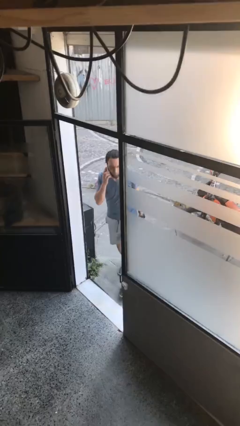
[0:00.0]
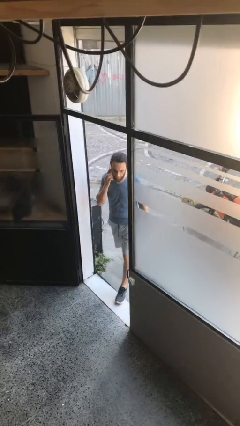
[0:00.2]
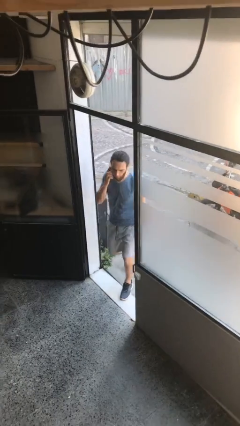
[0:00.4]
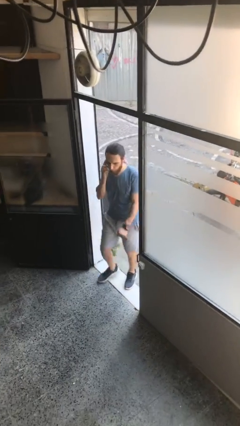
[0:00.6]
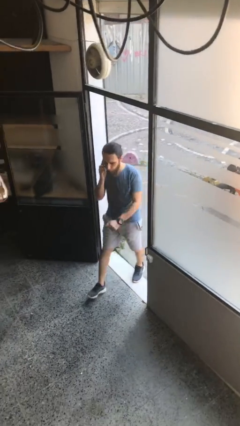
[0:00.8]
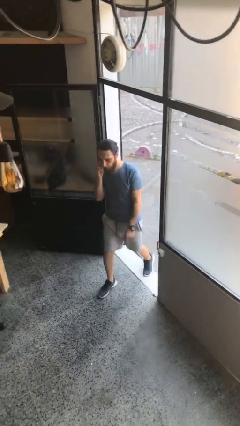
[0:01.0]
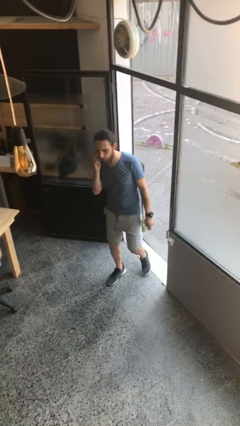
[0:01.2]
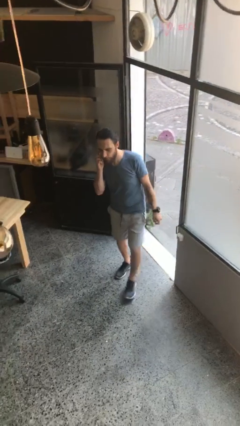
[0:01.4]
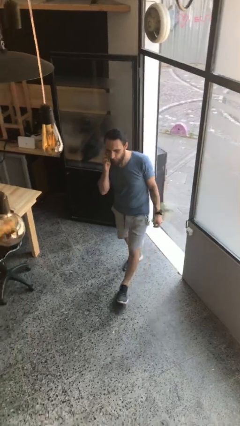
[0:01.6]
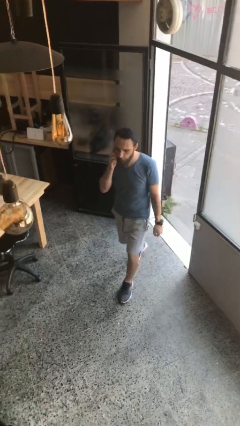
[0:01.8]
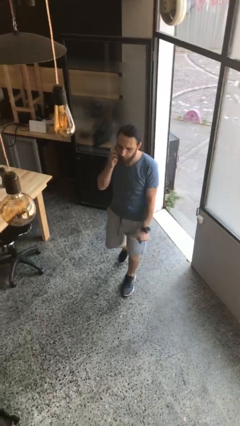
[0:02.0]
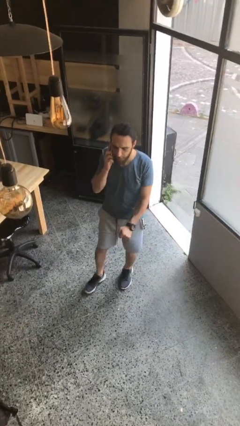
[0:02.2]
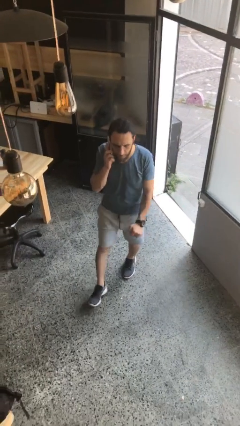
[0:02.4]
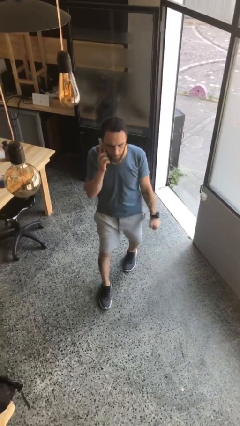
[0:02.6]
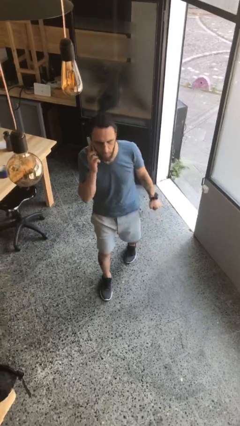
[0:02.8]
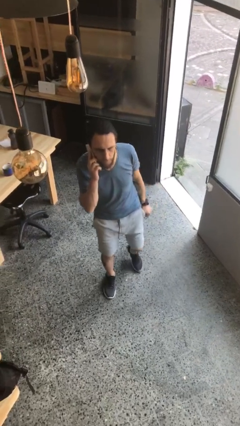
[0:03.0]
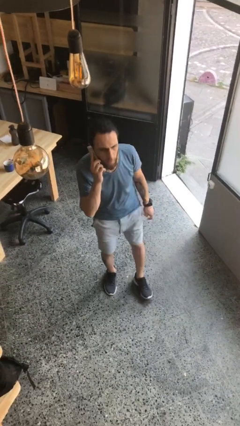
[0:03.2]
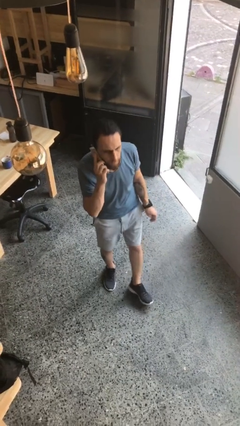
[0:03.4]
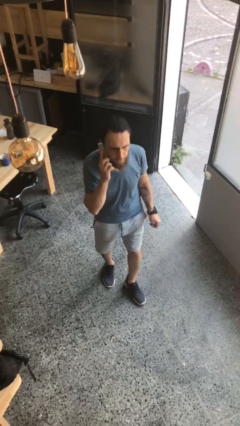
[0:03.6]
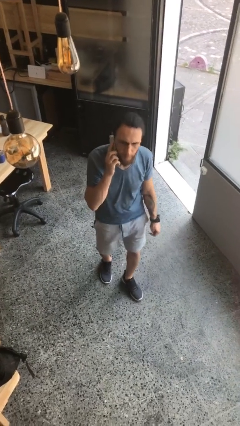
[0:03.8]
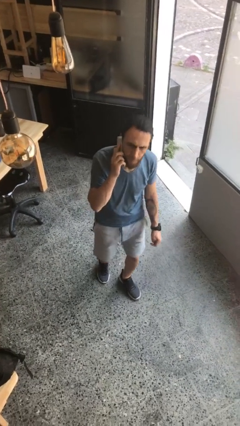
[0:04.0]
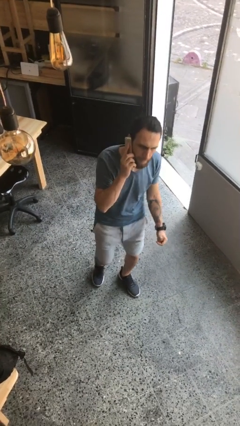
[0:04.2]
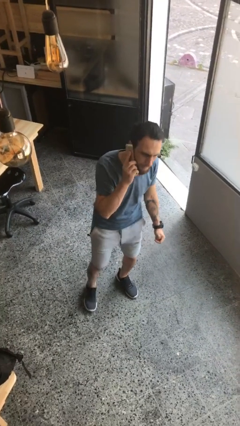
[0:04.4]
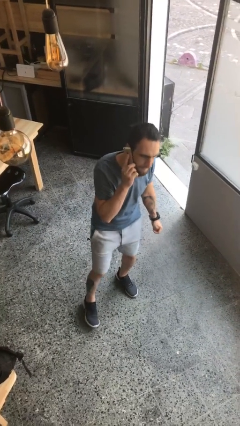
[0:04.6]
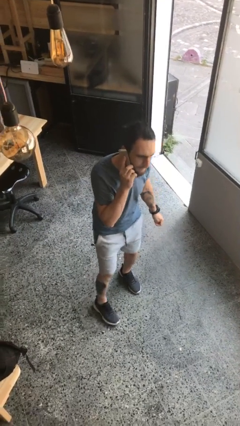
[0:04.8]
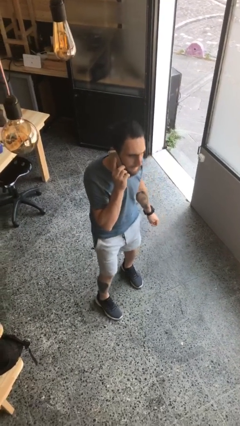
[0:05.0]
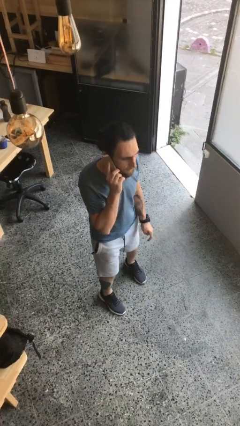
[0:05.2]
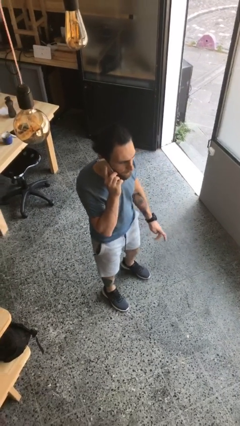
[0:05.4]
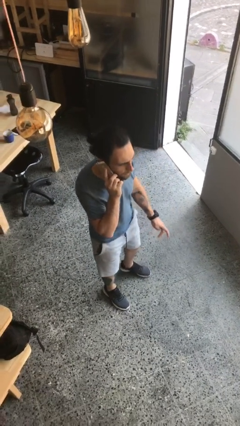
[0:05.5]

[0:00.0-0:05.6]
person enters scene through structure

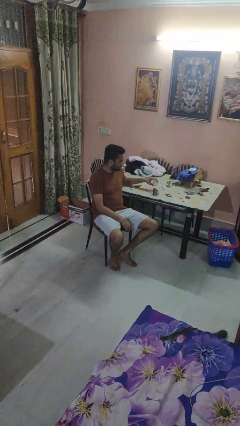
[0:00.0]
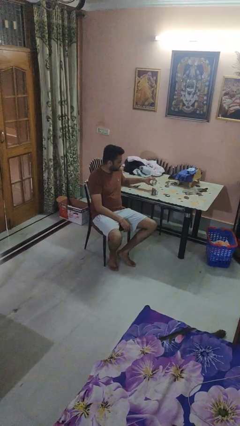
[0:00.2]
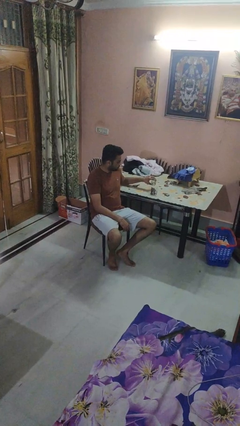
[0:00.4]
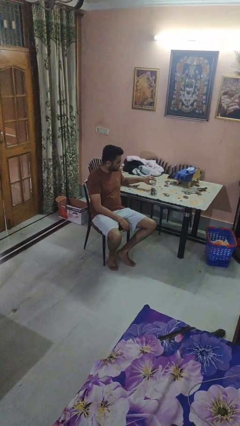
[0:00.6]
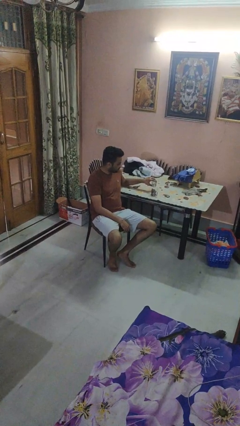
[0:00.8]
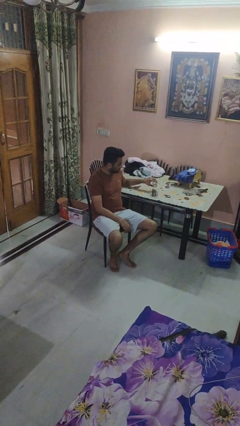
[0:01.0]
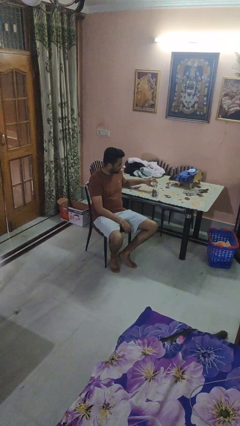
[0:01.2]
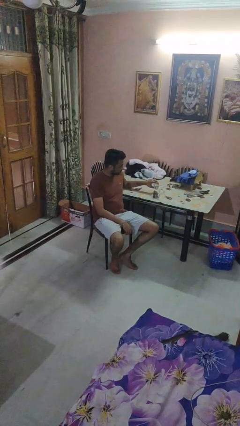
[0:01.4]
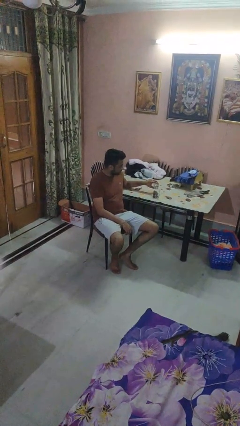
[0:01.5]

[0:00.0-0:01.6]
person pours liquid into cup

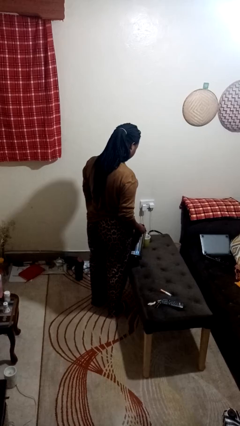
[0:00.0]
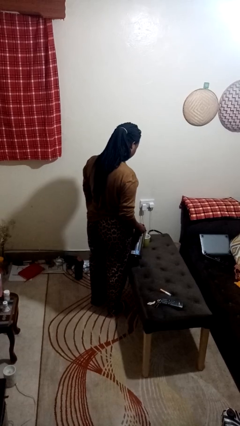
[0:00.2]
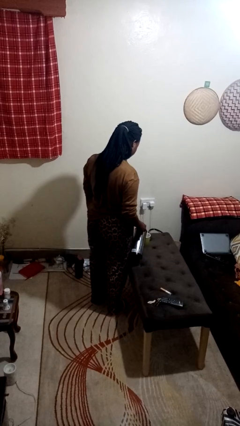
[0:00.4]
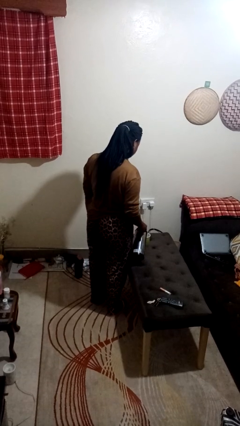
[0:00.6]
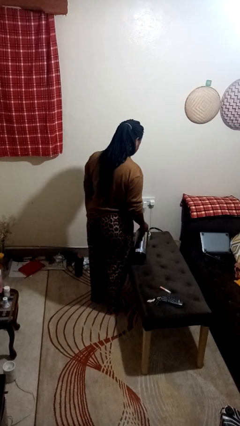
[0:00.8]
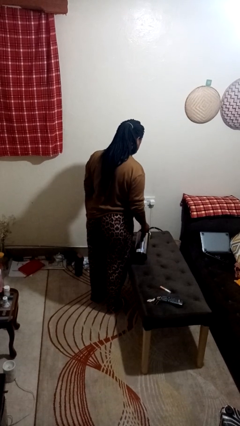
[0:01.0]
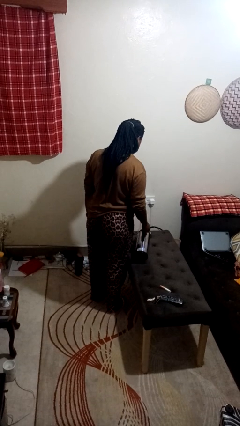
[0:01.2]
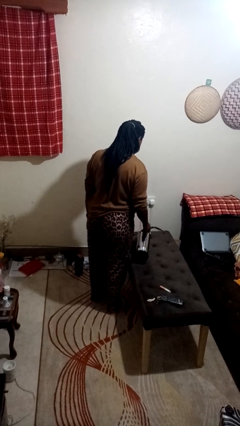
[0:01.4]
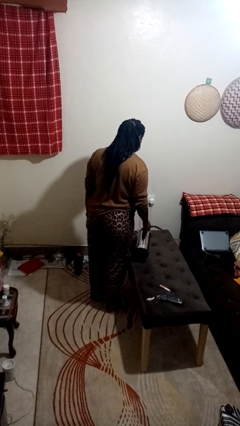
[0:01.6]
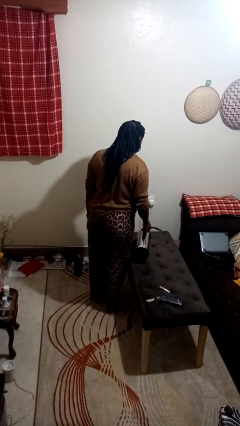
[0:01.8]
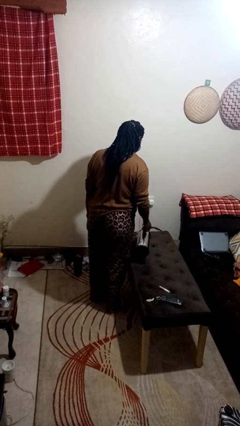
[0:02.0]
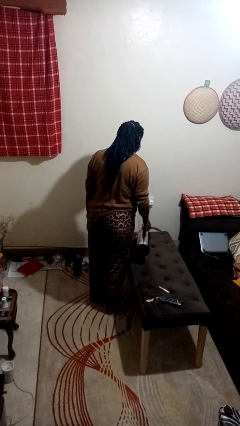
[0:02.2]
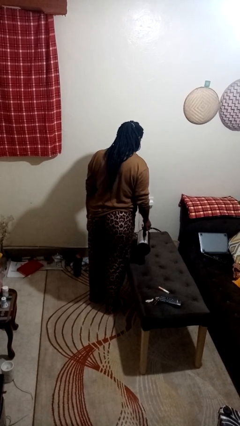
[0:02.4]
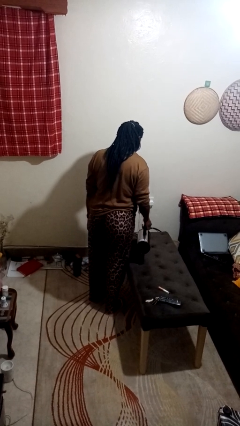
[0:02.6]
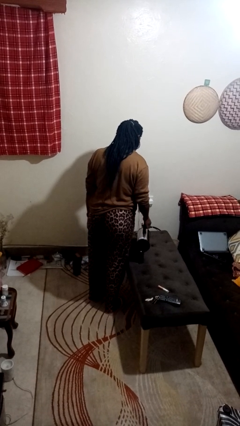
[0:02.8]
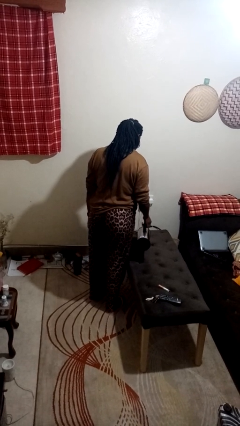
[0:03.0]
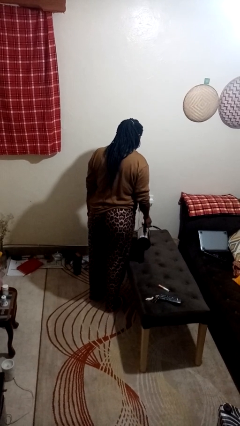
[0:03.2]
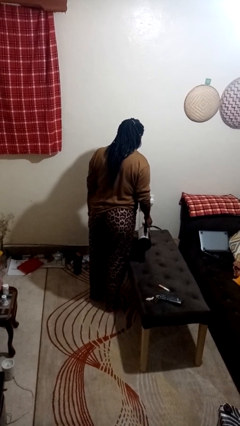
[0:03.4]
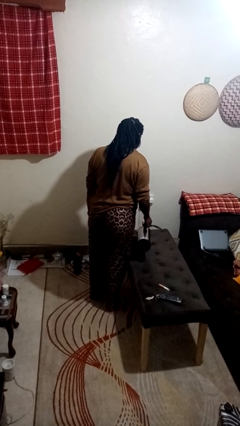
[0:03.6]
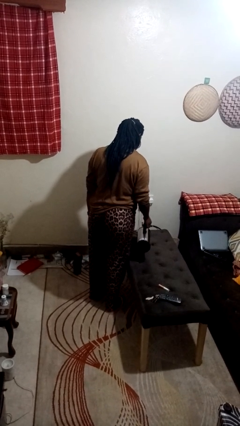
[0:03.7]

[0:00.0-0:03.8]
person pours coffee into mug

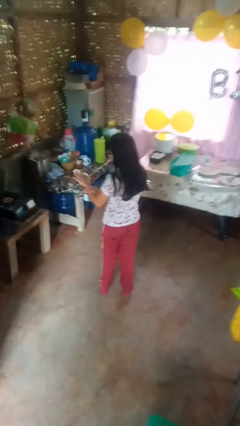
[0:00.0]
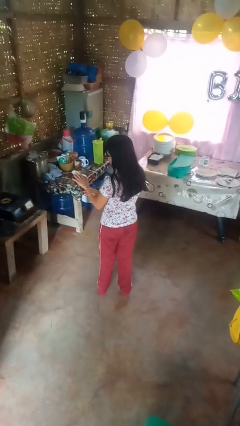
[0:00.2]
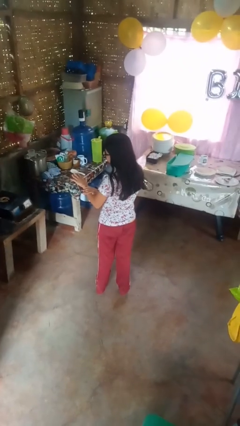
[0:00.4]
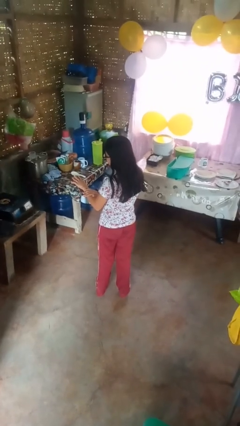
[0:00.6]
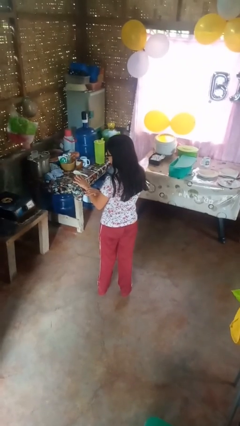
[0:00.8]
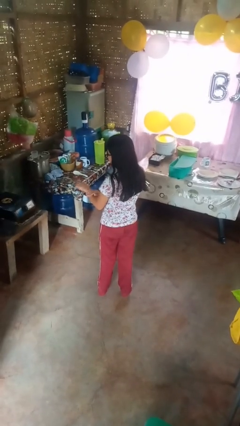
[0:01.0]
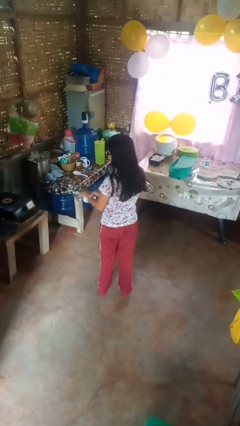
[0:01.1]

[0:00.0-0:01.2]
person swats bug

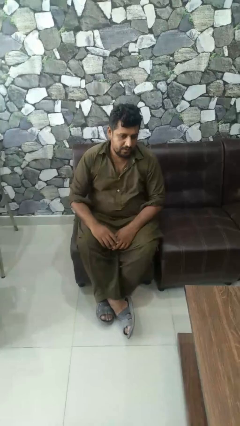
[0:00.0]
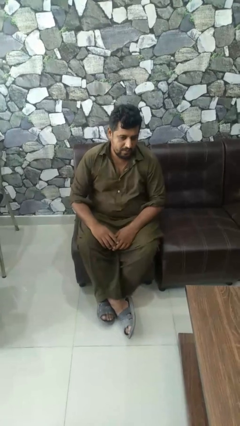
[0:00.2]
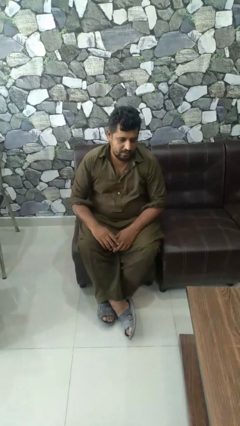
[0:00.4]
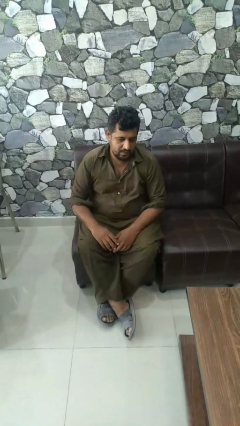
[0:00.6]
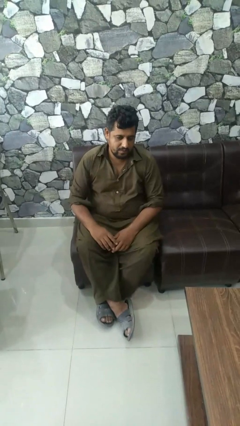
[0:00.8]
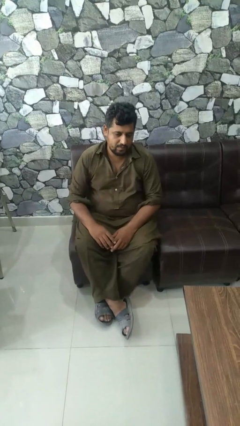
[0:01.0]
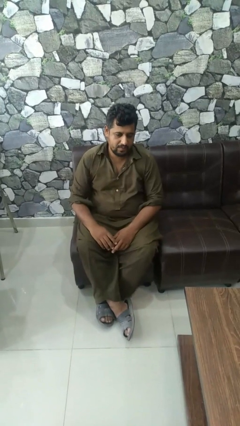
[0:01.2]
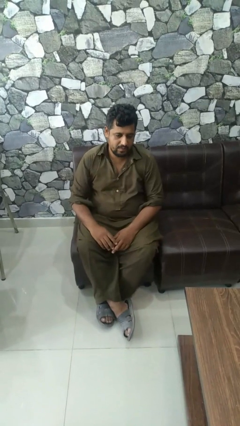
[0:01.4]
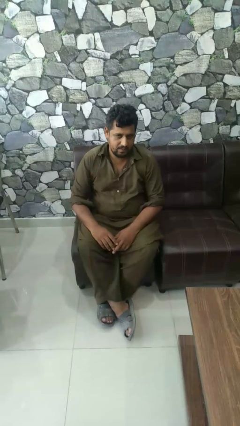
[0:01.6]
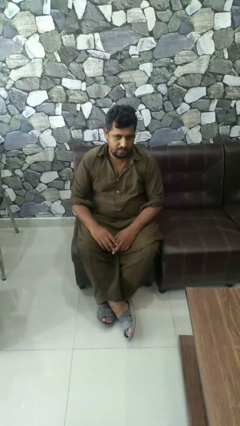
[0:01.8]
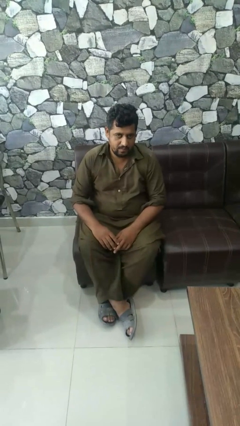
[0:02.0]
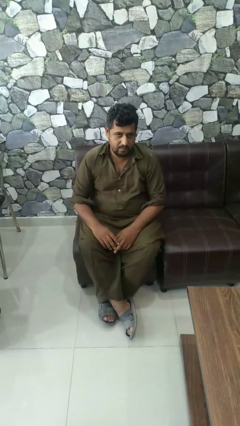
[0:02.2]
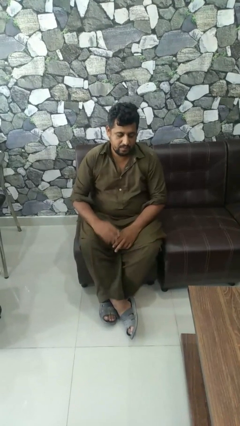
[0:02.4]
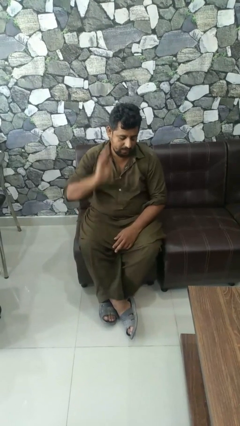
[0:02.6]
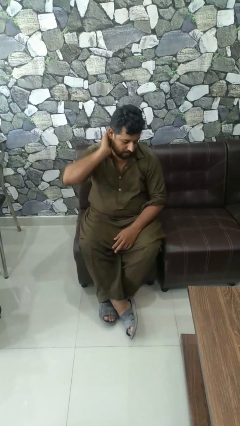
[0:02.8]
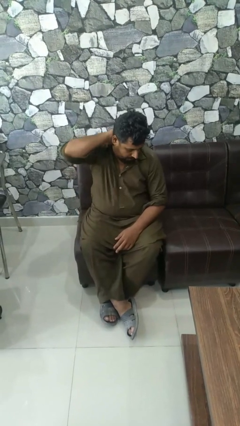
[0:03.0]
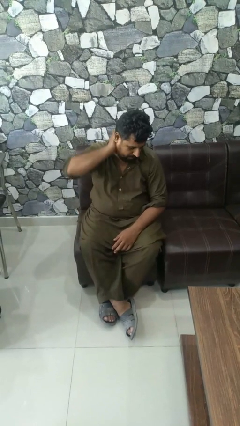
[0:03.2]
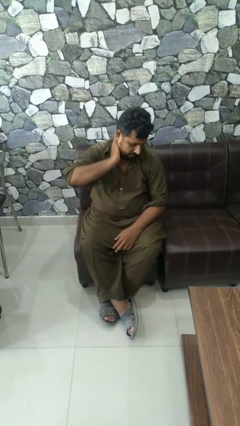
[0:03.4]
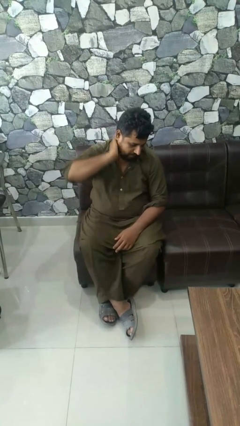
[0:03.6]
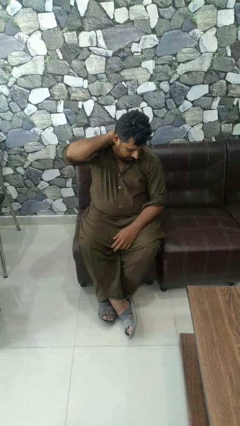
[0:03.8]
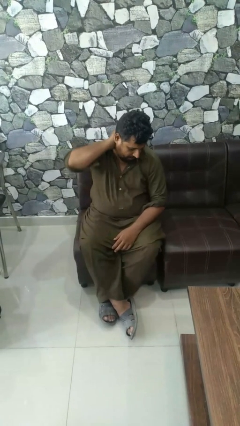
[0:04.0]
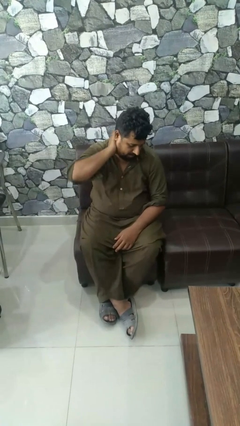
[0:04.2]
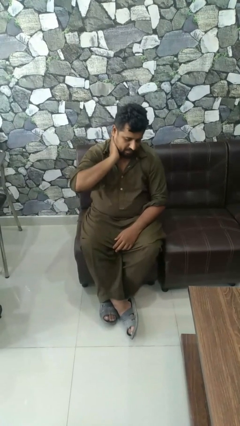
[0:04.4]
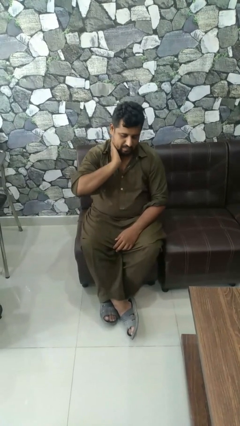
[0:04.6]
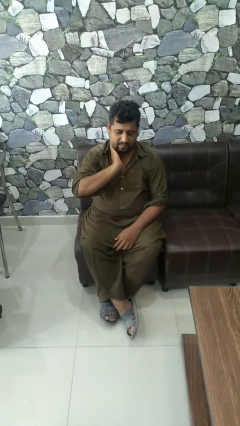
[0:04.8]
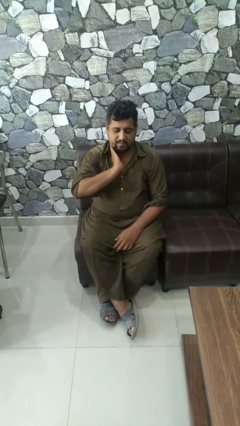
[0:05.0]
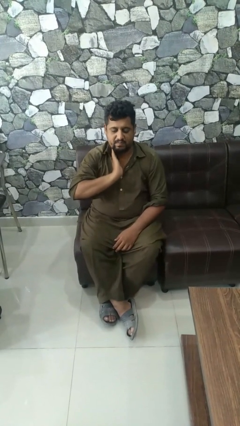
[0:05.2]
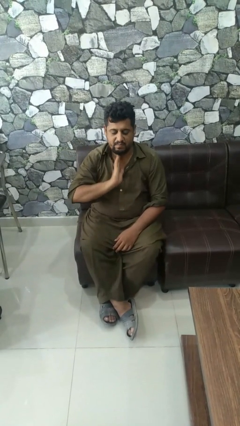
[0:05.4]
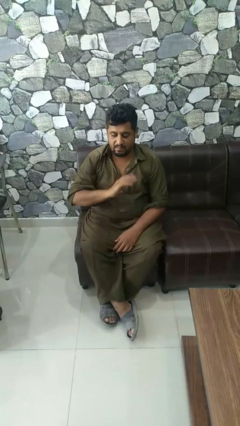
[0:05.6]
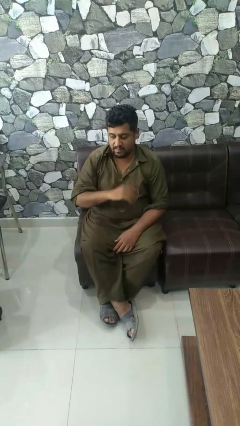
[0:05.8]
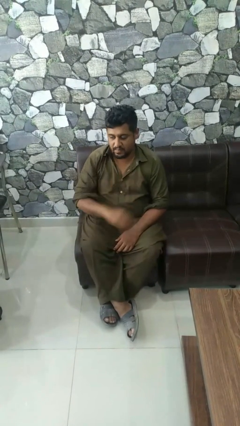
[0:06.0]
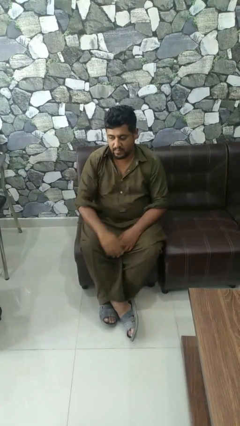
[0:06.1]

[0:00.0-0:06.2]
person rubs neck
